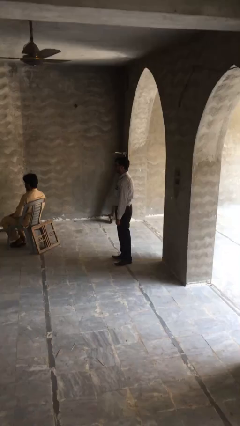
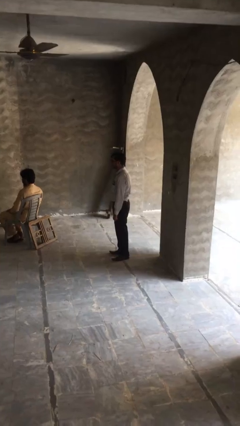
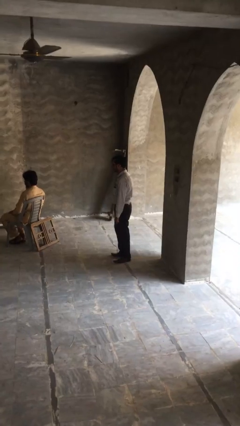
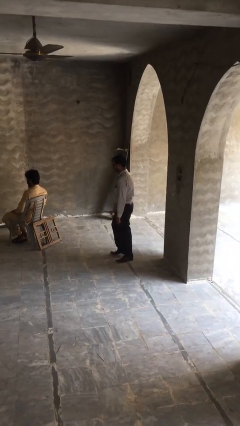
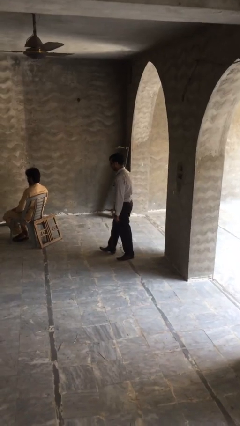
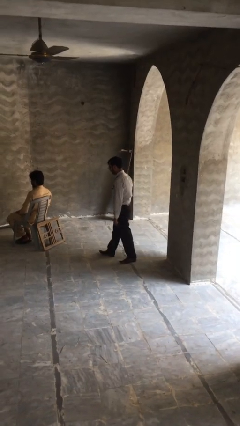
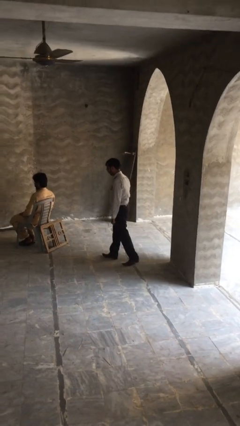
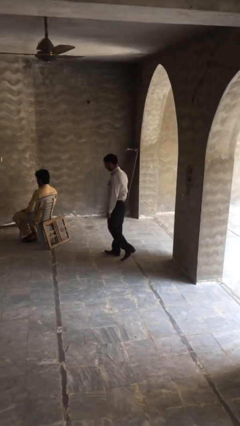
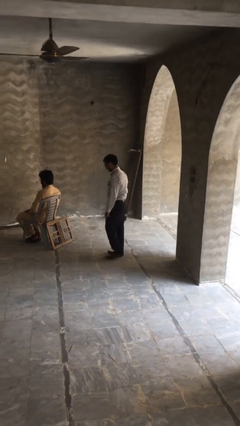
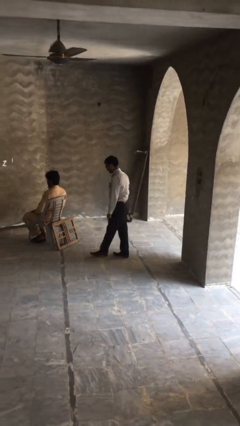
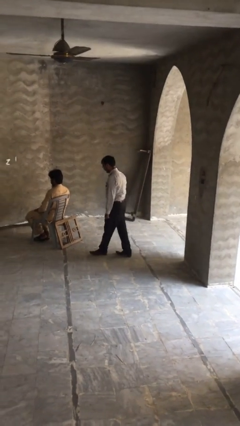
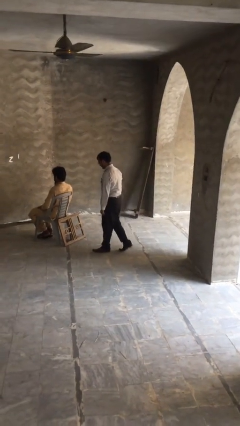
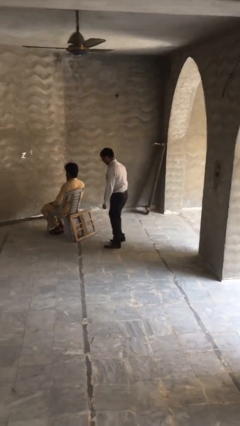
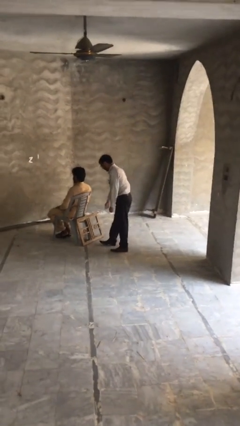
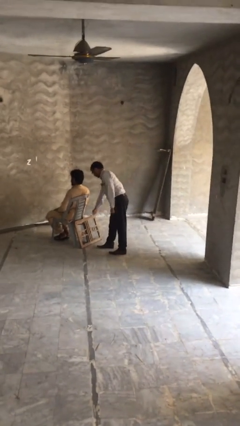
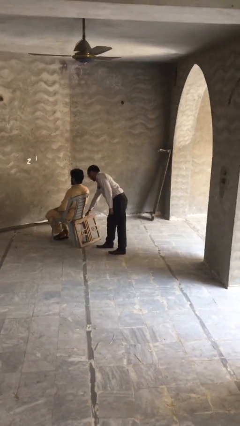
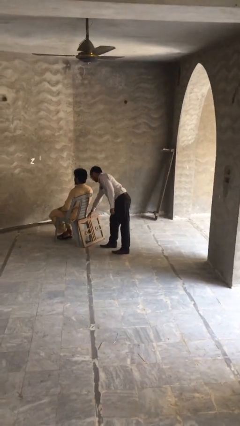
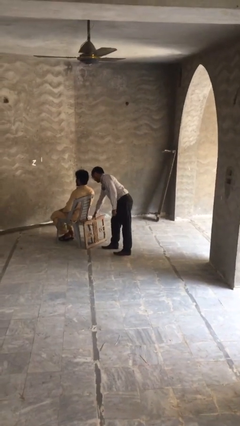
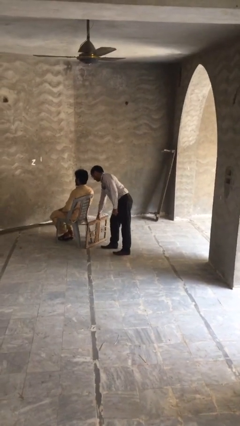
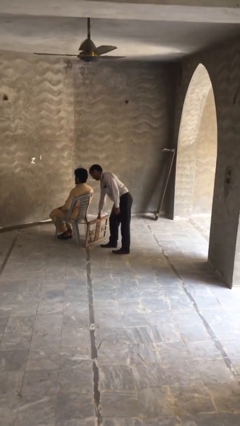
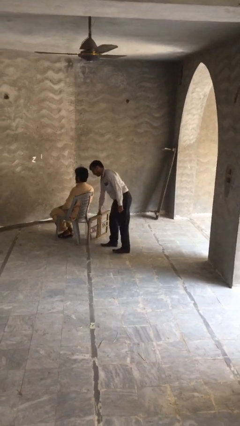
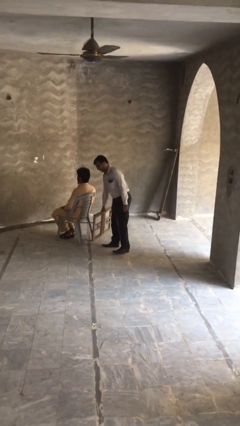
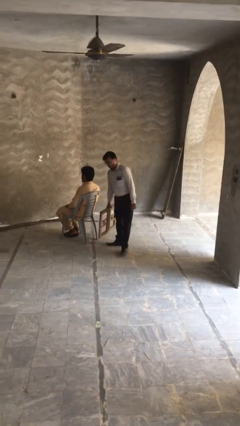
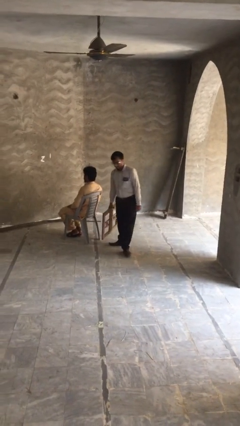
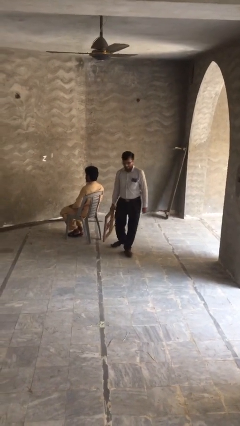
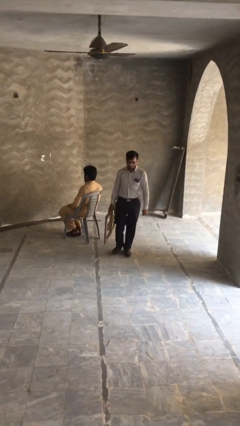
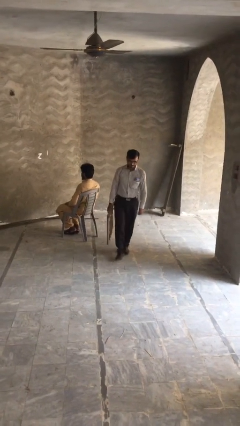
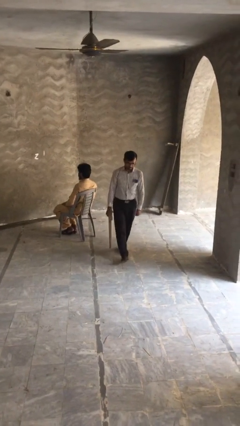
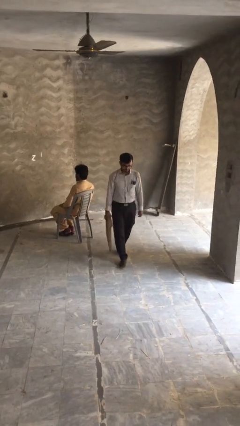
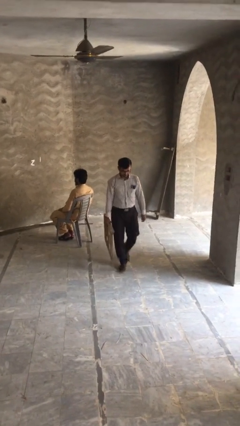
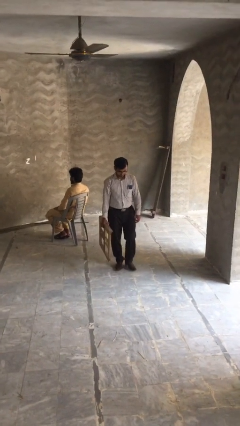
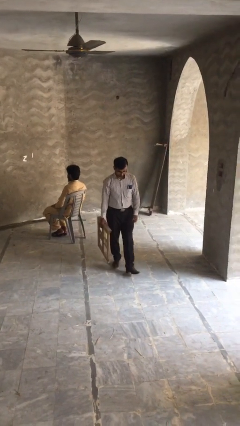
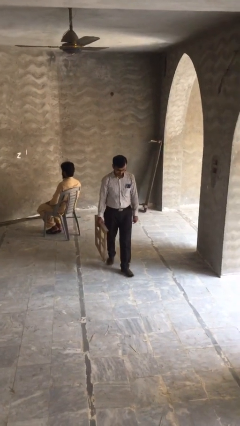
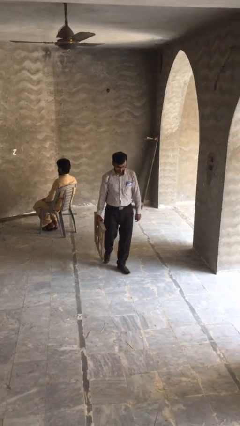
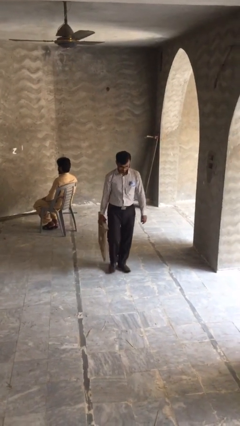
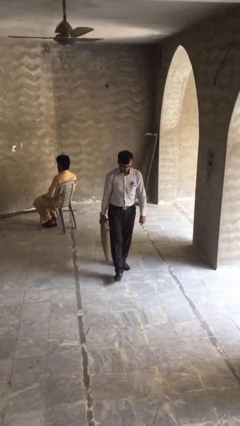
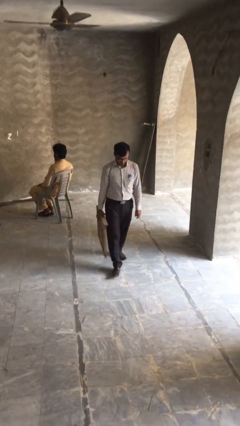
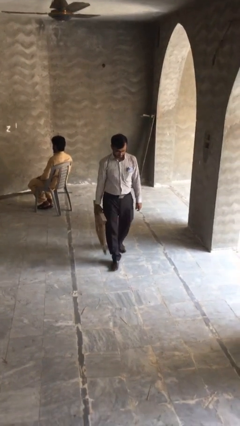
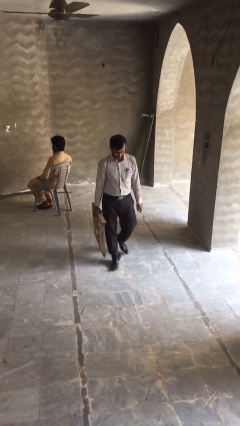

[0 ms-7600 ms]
person steals object from person

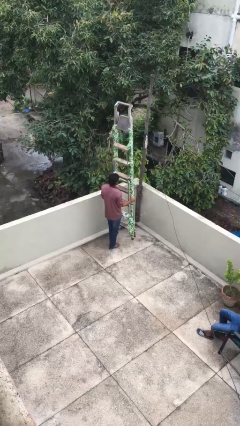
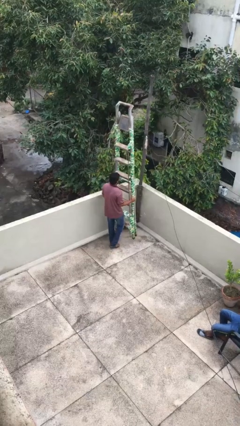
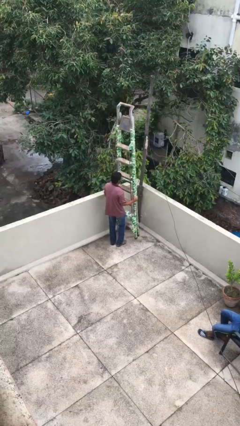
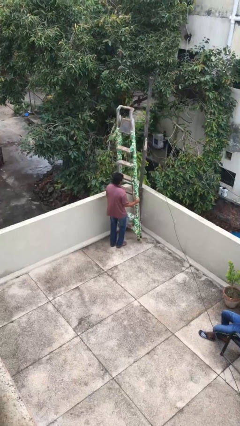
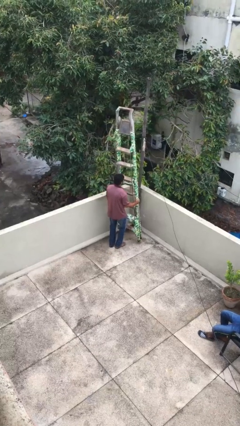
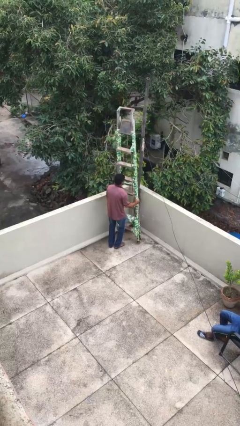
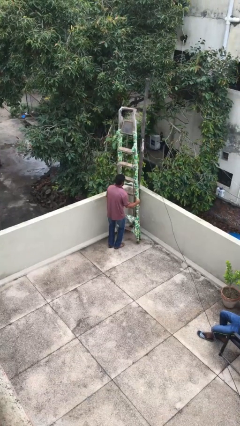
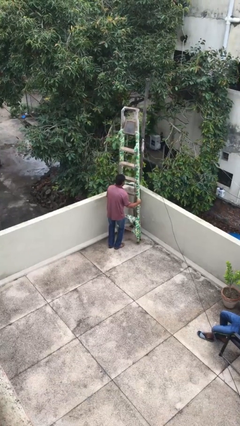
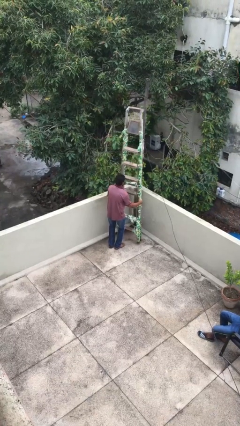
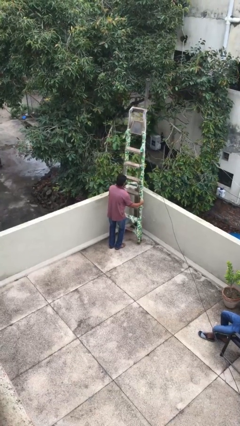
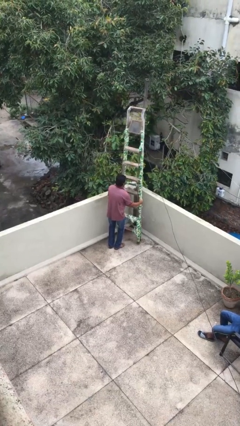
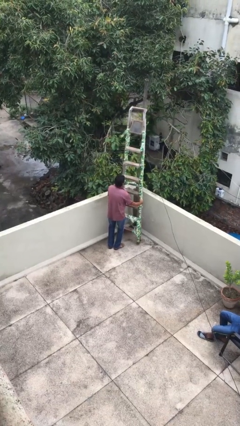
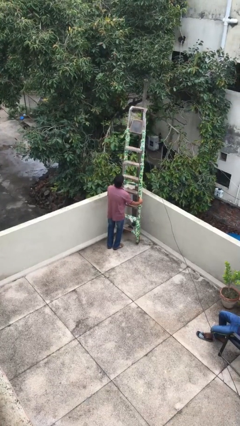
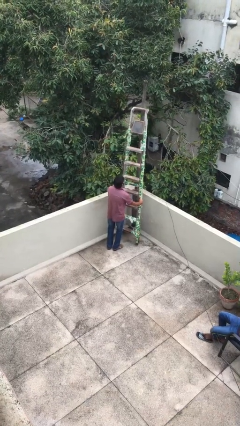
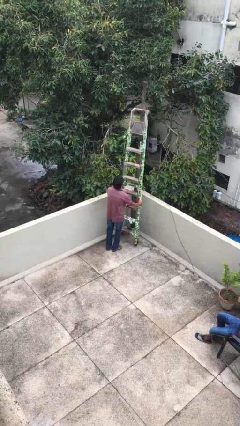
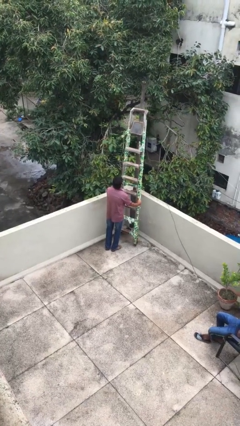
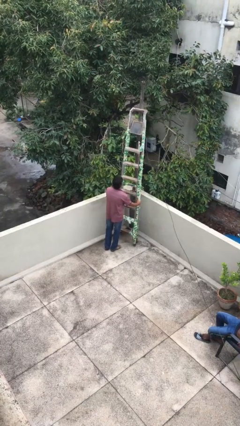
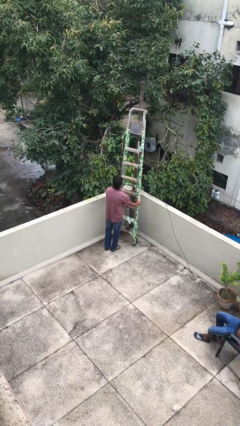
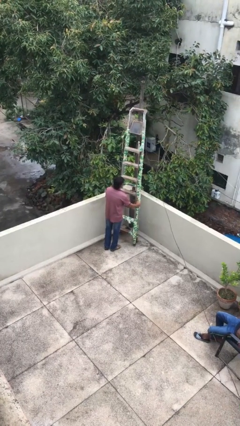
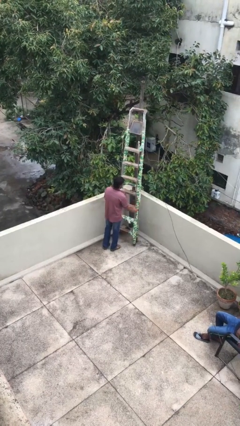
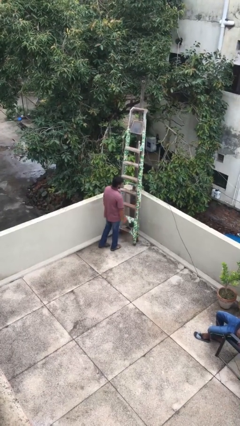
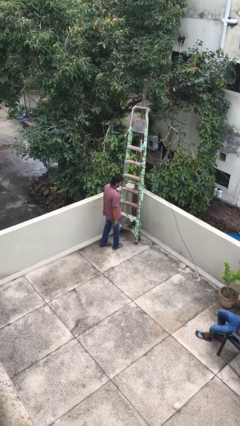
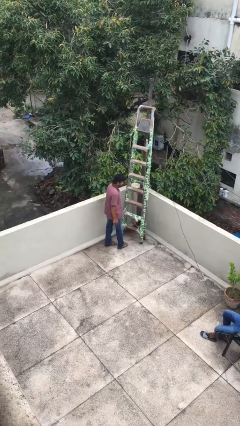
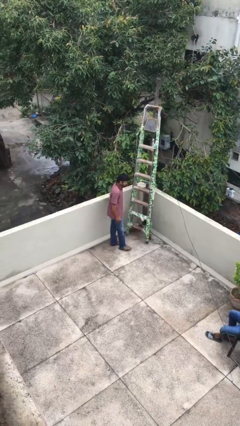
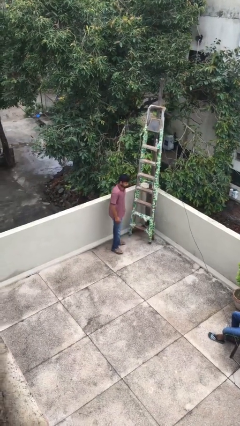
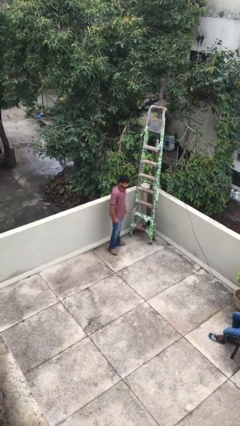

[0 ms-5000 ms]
person puts down object on floor

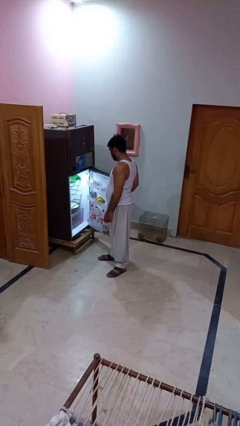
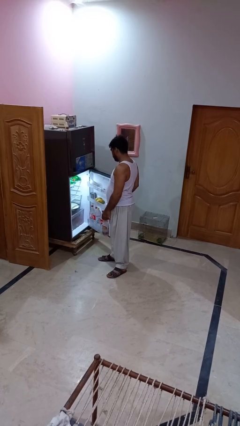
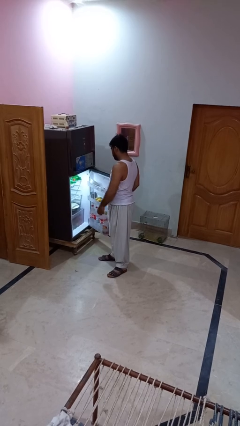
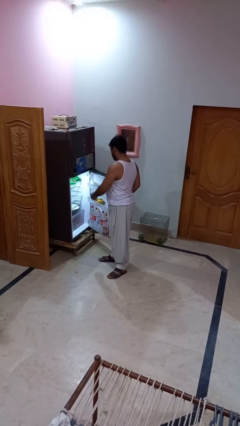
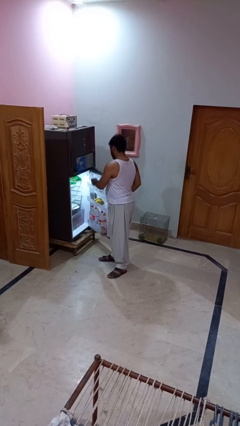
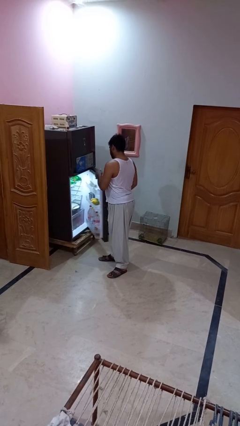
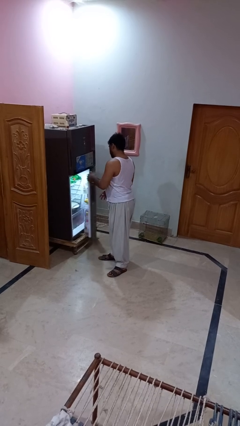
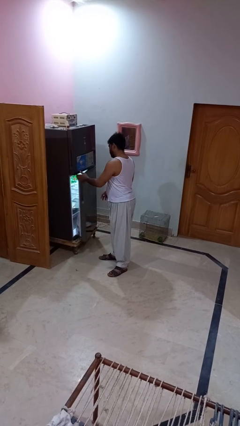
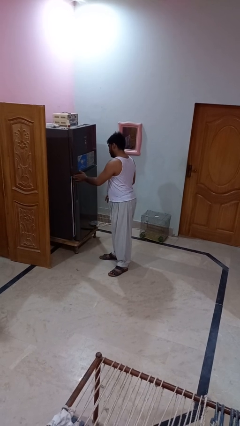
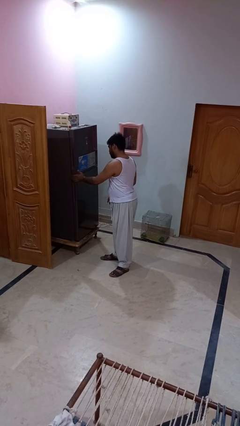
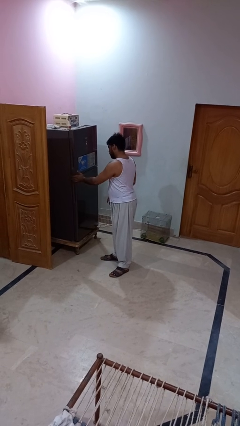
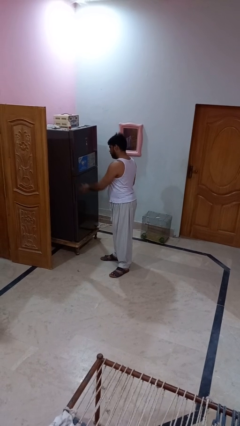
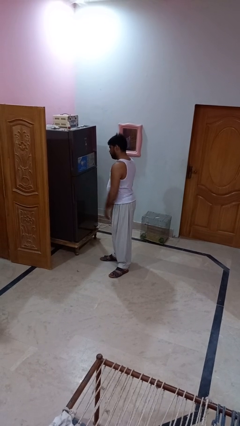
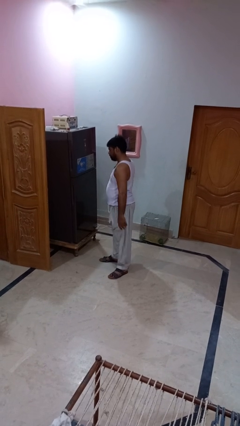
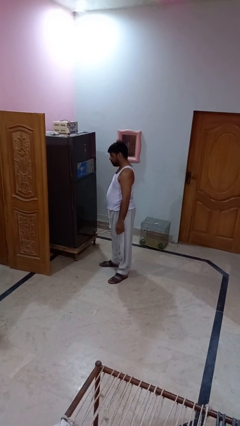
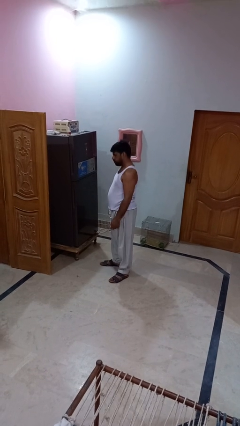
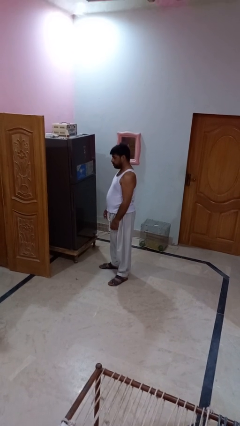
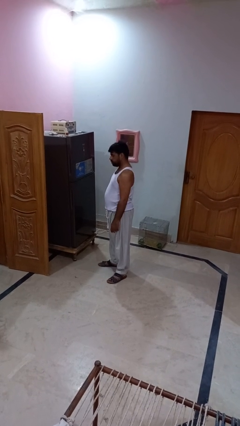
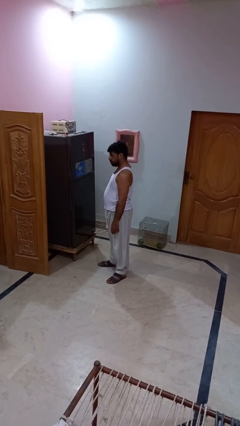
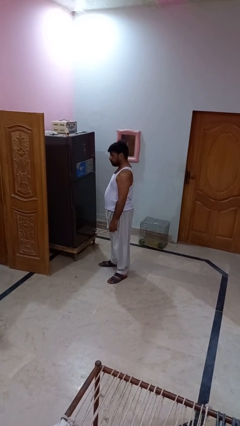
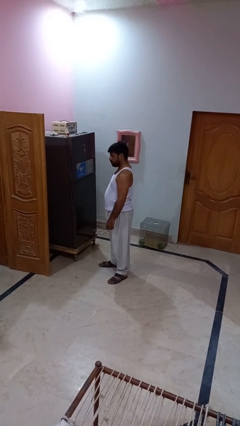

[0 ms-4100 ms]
person closes refrigerator

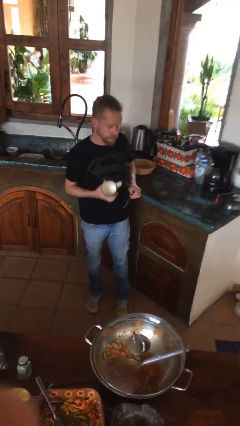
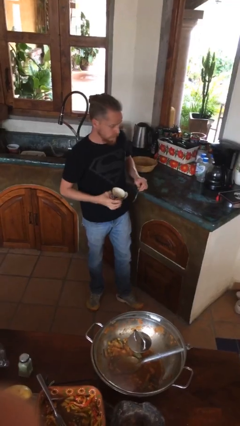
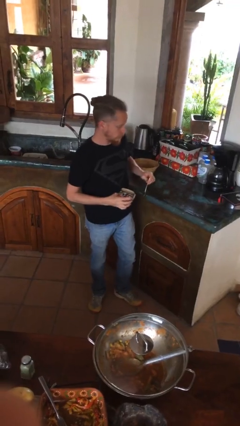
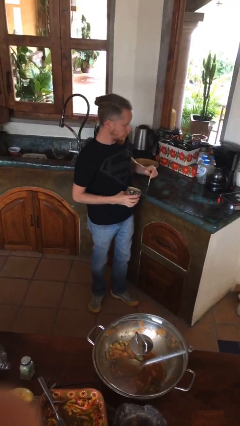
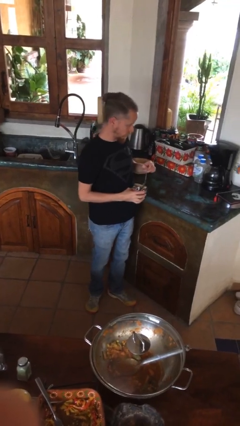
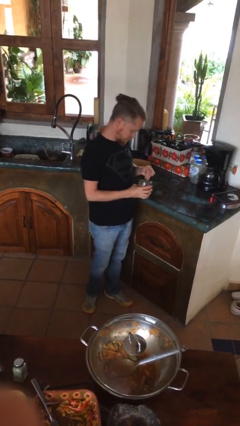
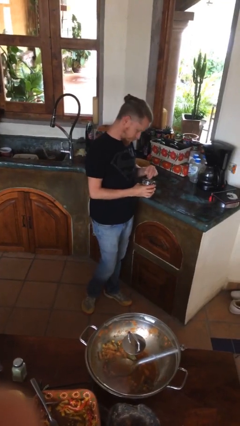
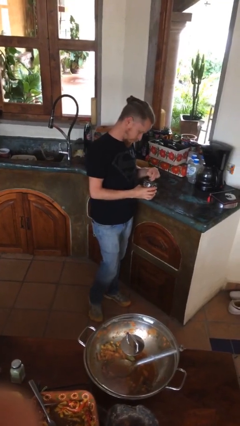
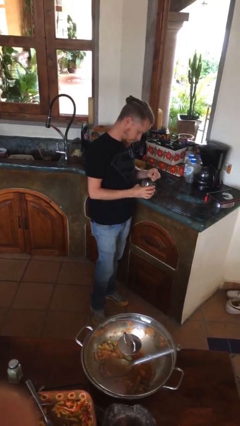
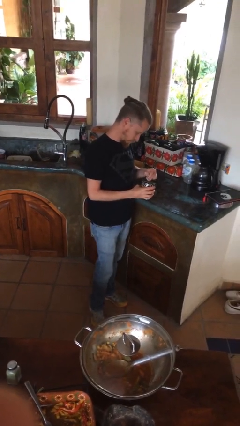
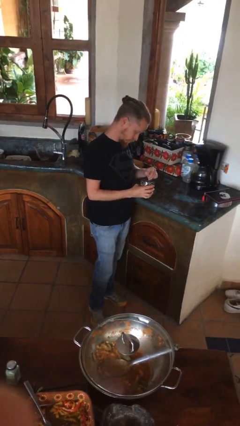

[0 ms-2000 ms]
person stirs mug
